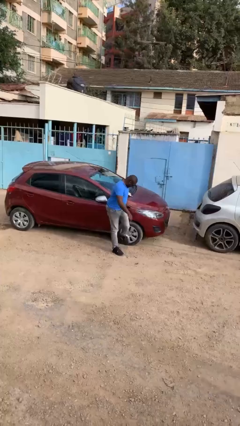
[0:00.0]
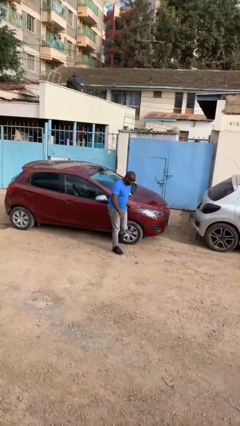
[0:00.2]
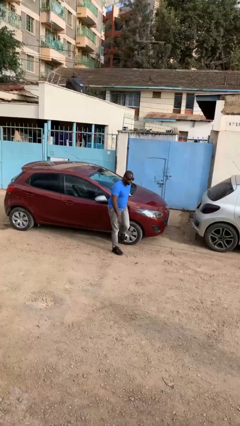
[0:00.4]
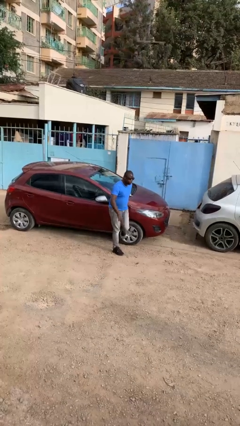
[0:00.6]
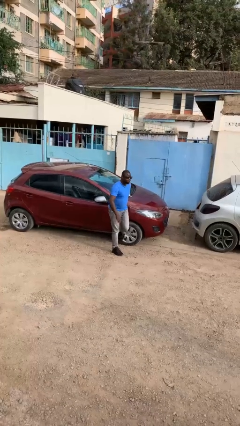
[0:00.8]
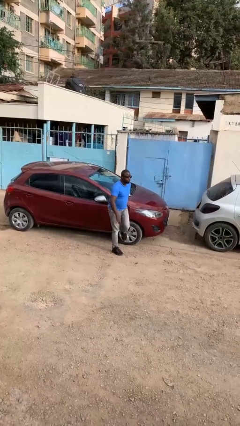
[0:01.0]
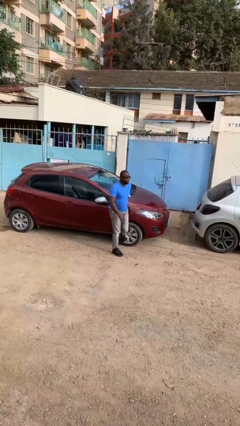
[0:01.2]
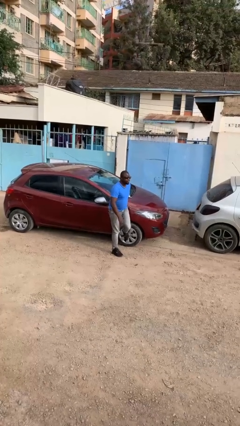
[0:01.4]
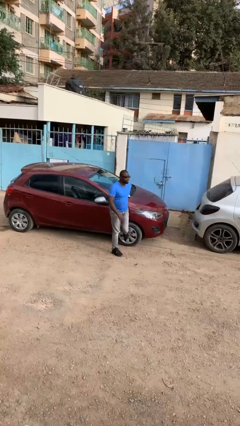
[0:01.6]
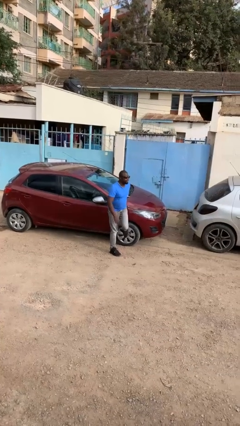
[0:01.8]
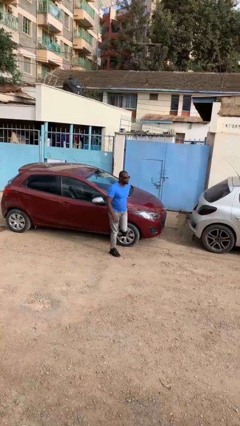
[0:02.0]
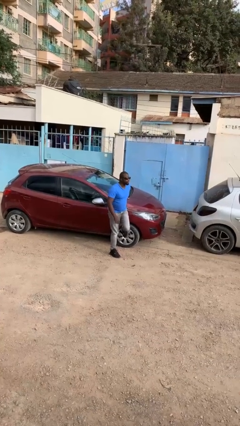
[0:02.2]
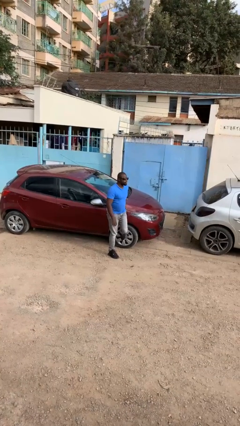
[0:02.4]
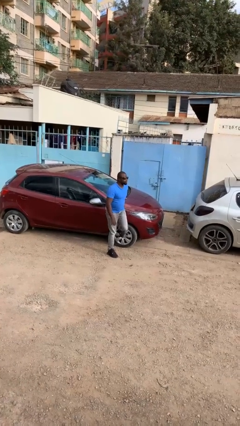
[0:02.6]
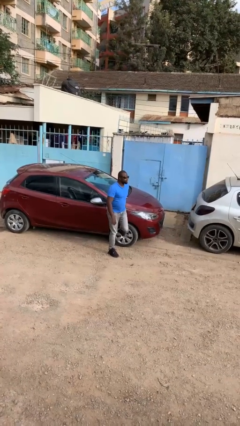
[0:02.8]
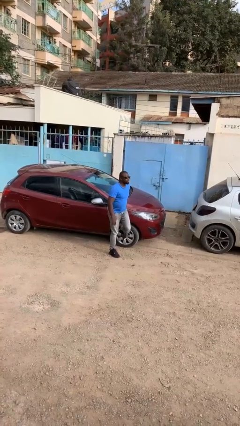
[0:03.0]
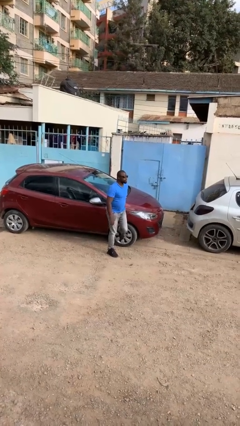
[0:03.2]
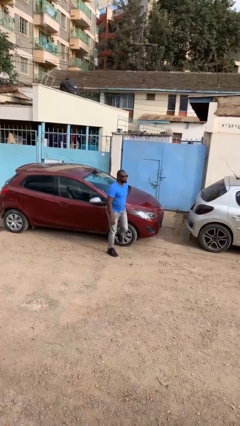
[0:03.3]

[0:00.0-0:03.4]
person kicks car tires

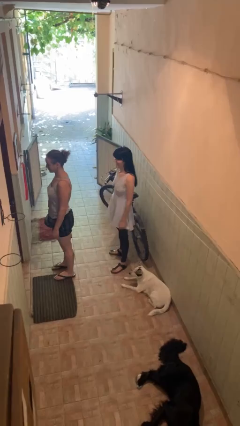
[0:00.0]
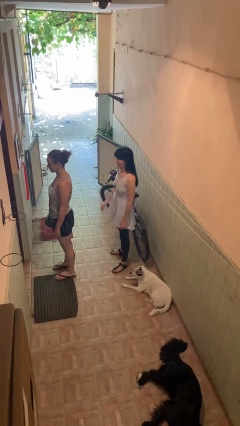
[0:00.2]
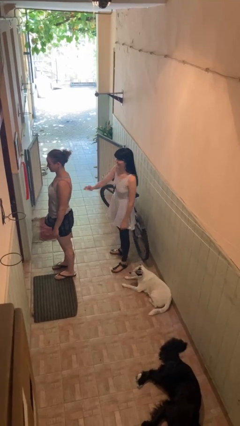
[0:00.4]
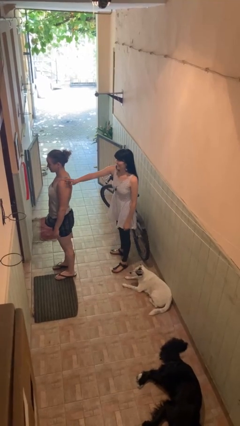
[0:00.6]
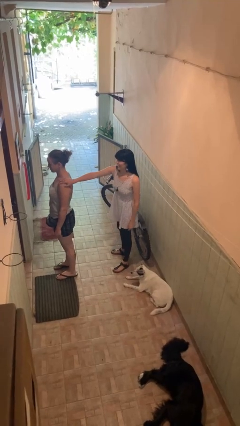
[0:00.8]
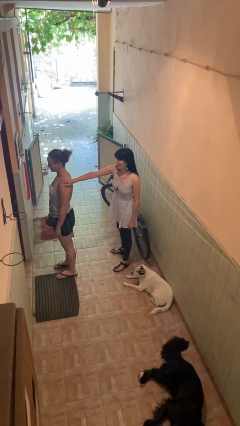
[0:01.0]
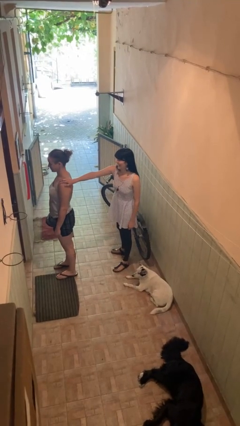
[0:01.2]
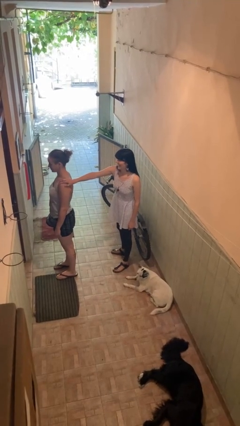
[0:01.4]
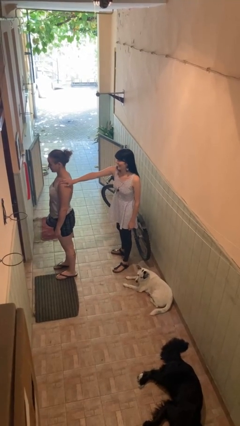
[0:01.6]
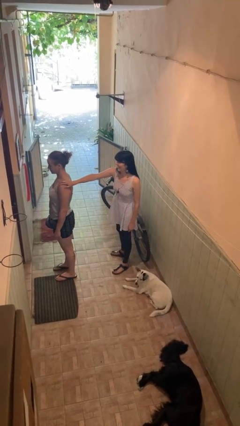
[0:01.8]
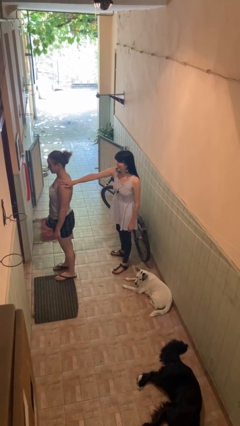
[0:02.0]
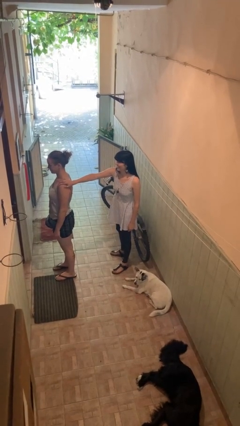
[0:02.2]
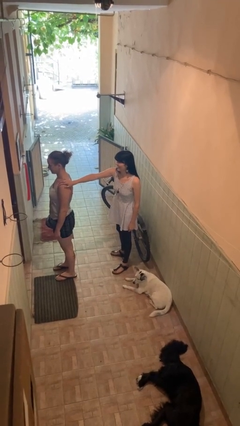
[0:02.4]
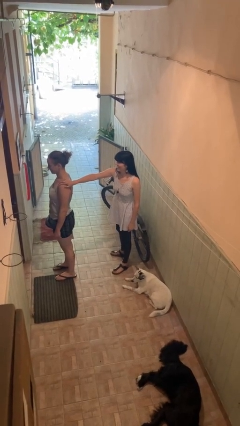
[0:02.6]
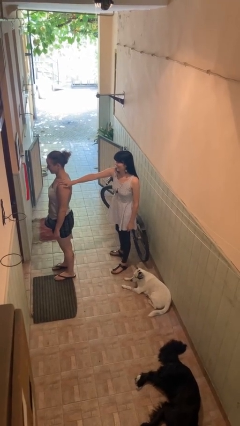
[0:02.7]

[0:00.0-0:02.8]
person grabs person by shoulder

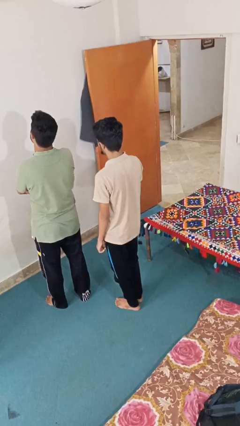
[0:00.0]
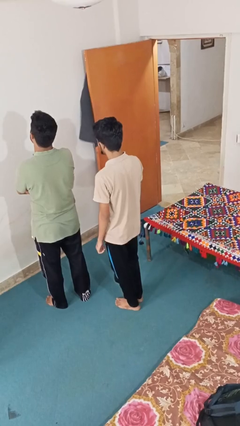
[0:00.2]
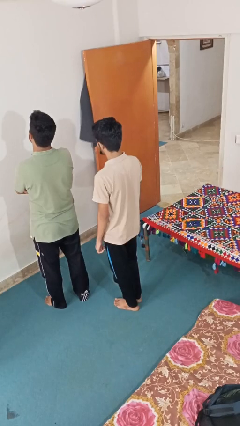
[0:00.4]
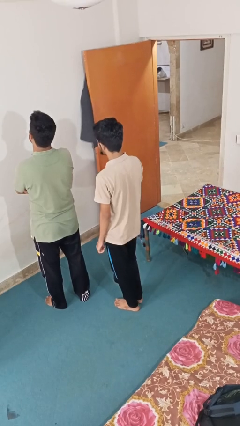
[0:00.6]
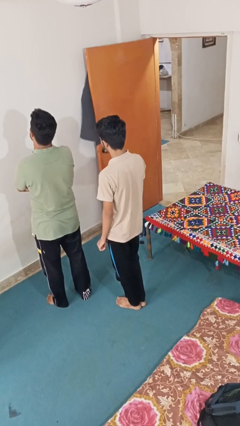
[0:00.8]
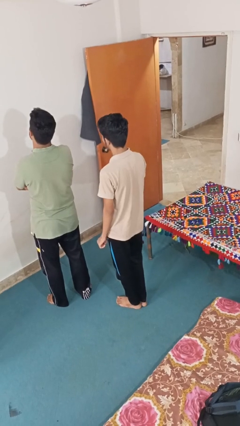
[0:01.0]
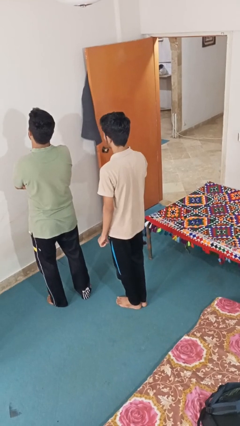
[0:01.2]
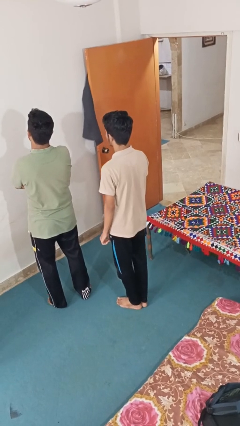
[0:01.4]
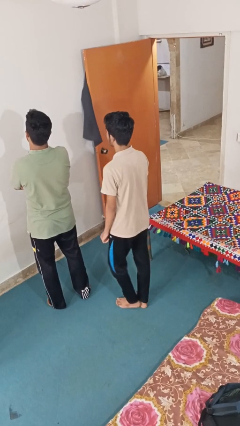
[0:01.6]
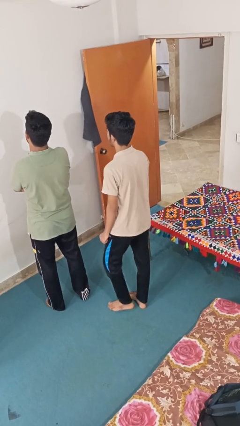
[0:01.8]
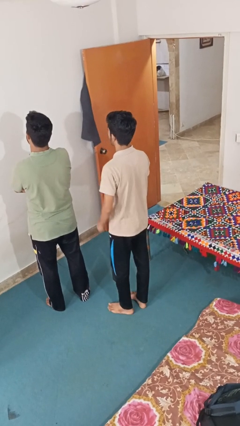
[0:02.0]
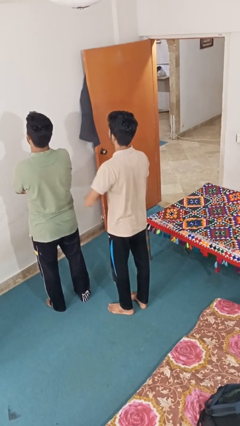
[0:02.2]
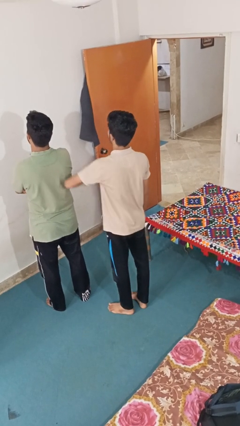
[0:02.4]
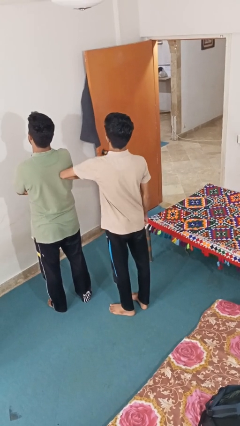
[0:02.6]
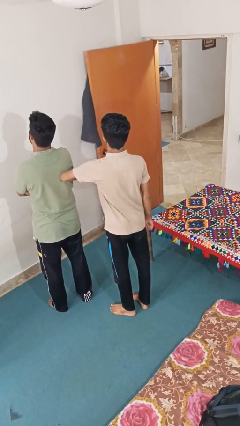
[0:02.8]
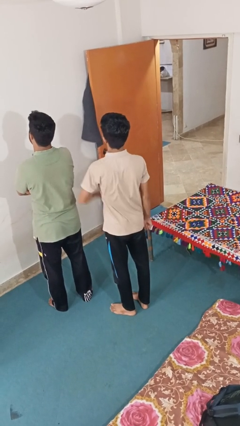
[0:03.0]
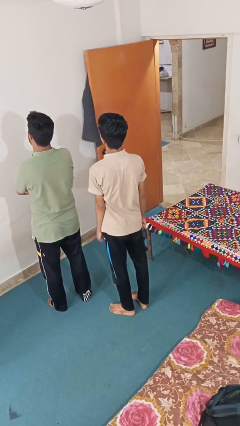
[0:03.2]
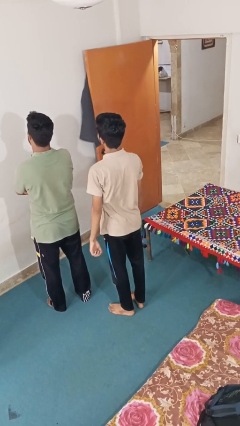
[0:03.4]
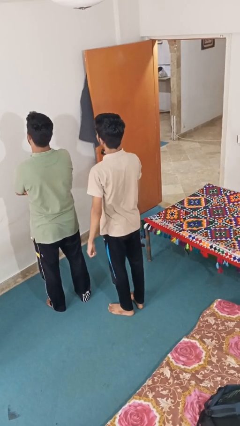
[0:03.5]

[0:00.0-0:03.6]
person nudges person with elbow

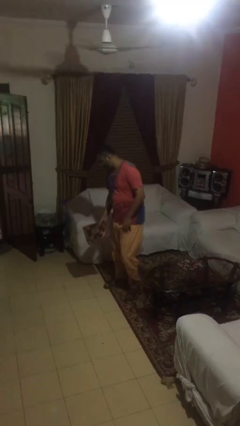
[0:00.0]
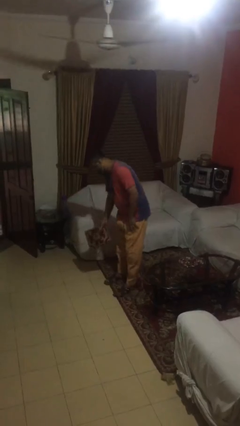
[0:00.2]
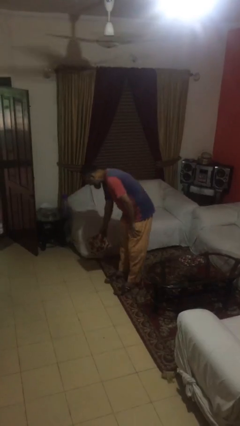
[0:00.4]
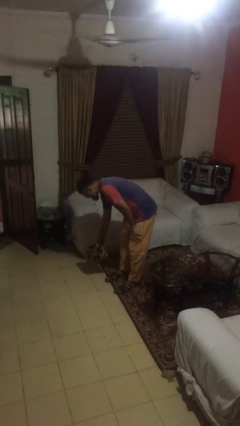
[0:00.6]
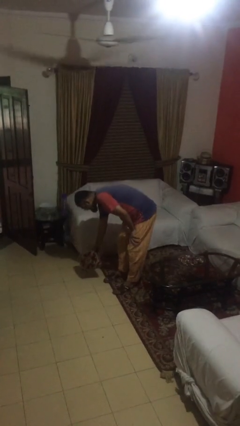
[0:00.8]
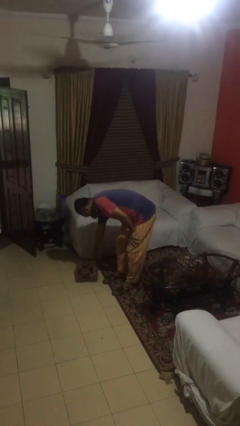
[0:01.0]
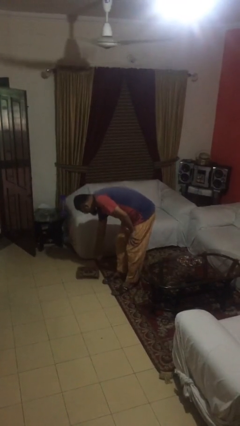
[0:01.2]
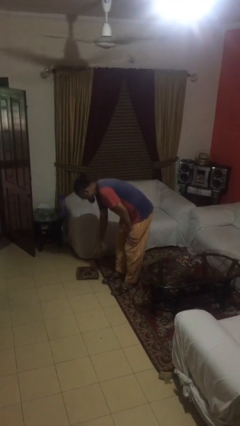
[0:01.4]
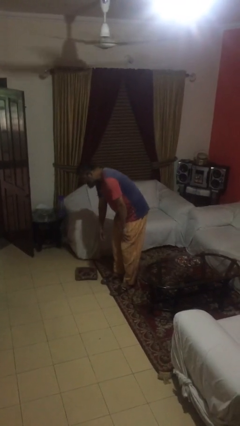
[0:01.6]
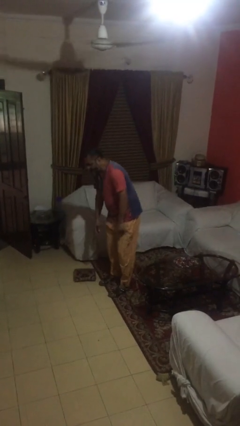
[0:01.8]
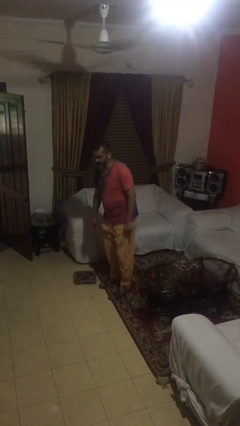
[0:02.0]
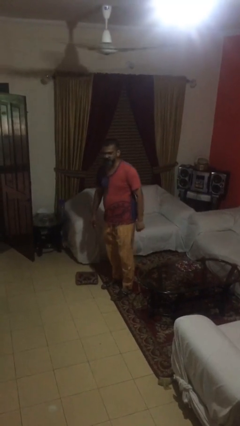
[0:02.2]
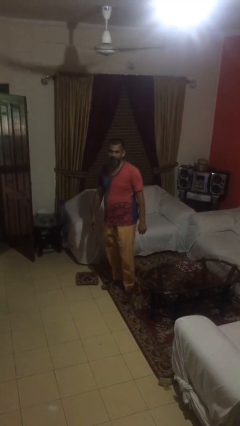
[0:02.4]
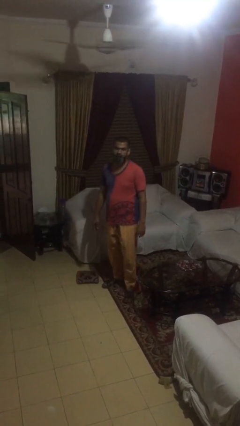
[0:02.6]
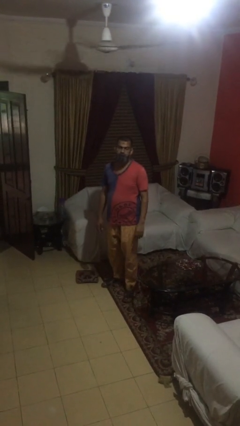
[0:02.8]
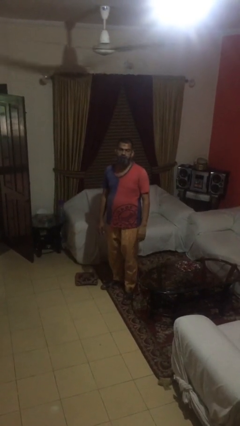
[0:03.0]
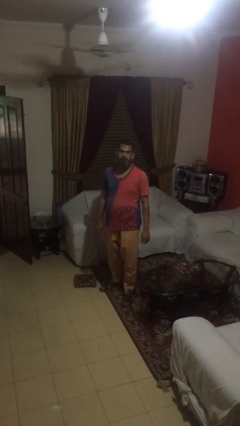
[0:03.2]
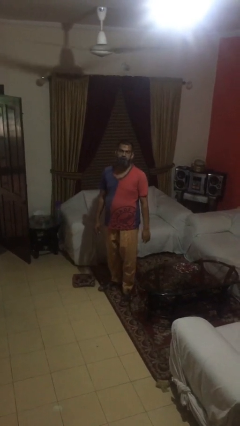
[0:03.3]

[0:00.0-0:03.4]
person puts down object on floor

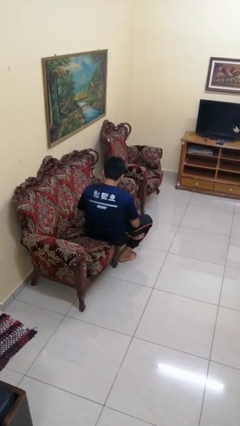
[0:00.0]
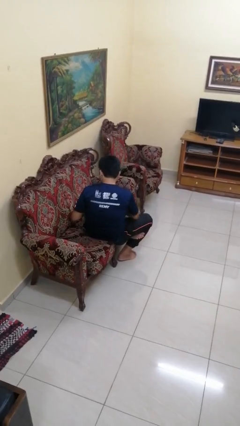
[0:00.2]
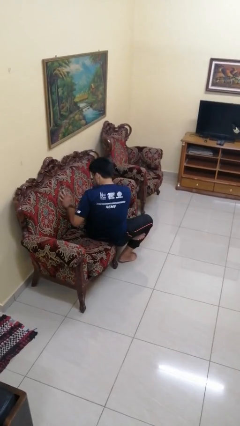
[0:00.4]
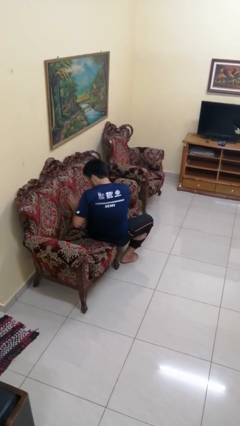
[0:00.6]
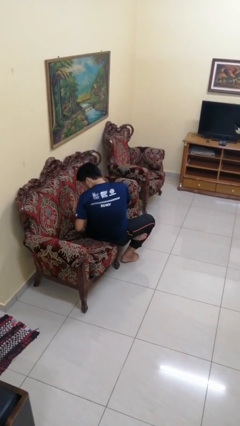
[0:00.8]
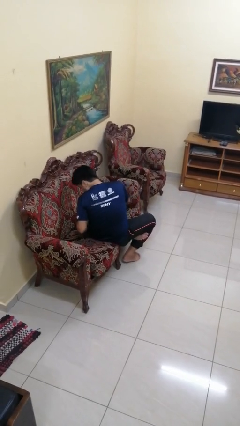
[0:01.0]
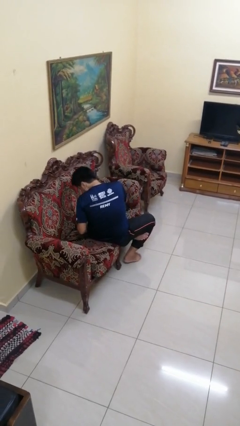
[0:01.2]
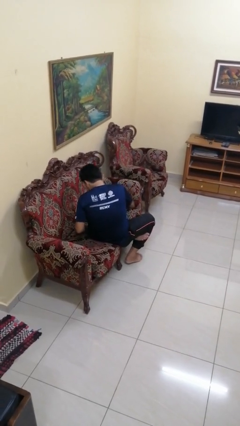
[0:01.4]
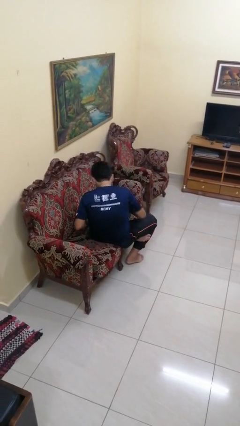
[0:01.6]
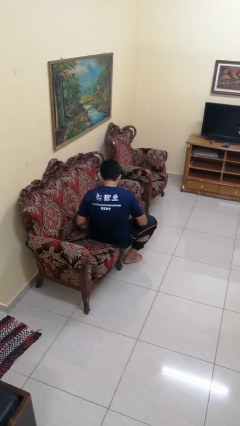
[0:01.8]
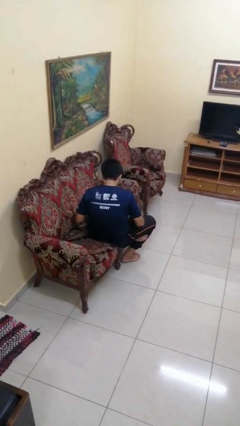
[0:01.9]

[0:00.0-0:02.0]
person searches in couch

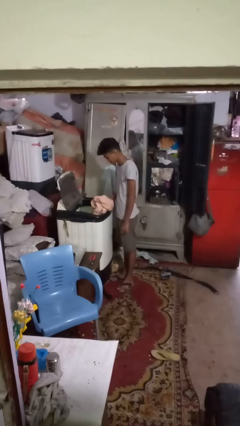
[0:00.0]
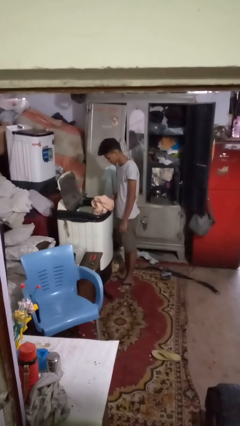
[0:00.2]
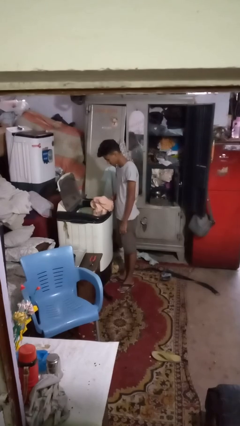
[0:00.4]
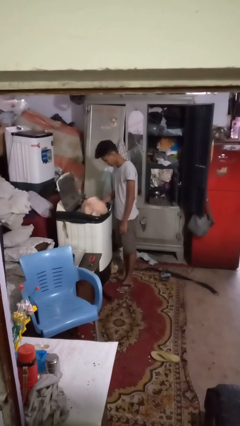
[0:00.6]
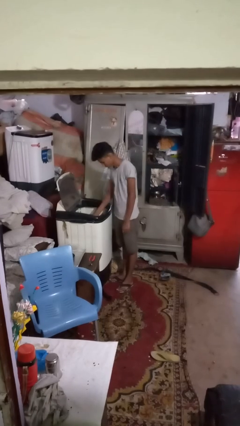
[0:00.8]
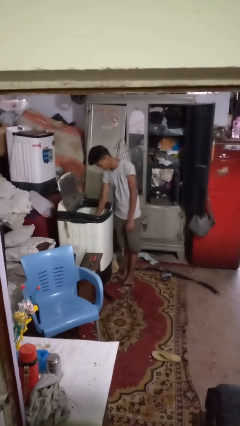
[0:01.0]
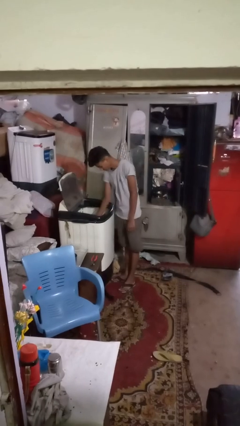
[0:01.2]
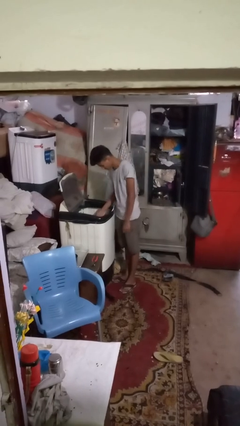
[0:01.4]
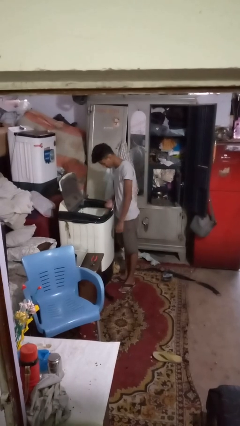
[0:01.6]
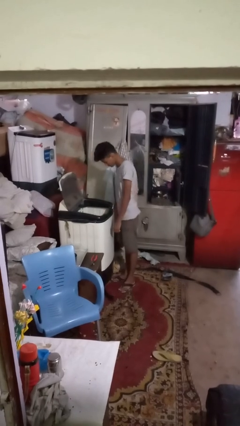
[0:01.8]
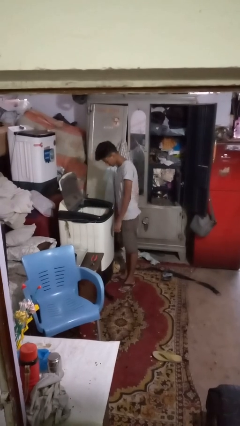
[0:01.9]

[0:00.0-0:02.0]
person loads clotheswasher
